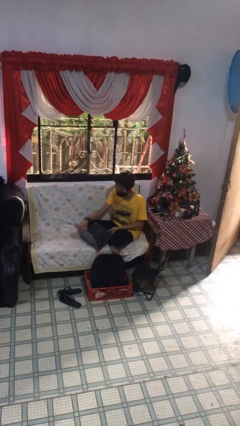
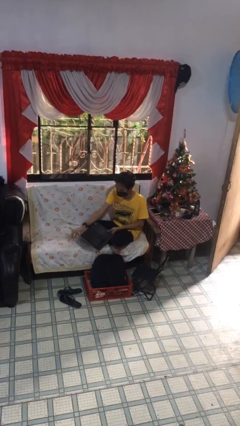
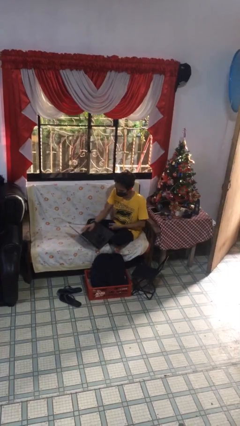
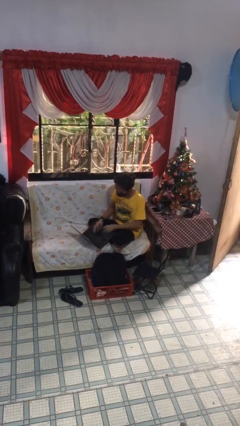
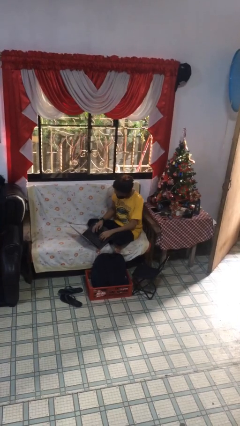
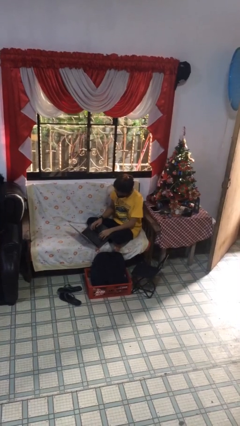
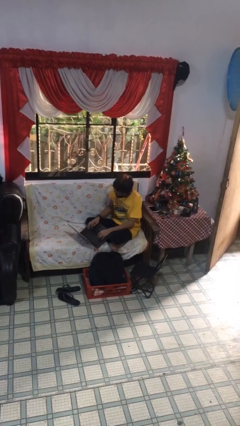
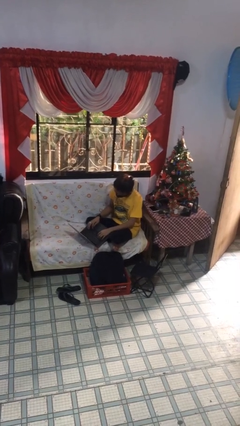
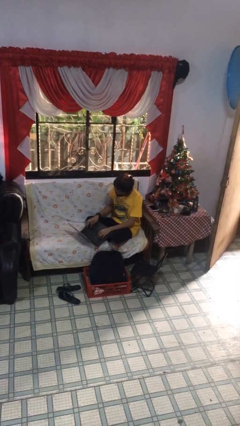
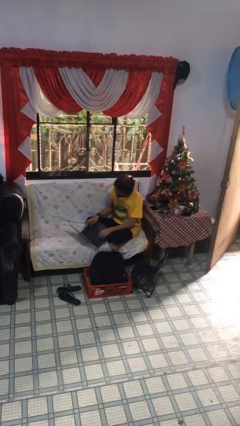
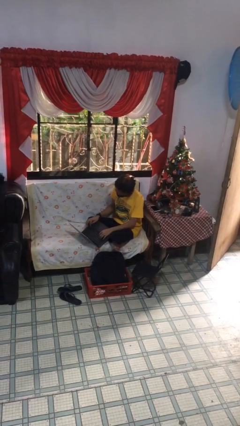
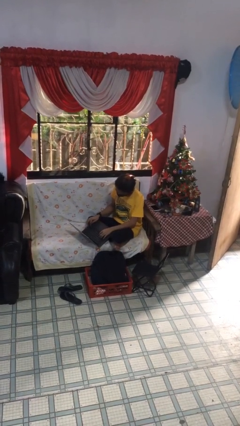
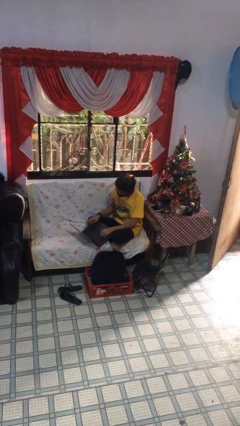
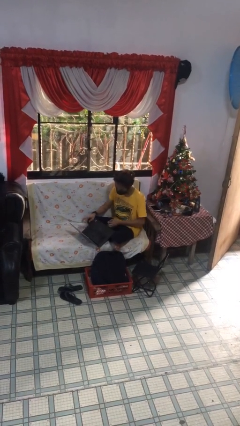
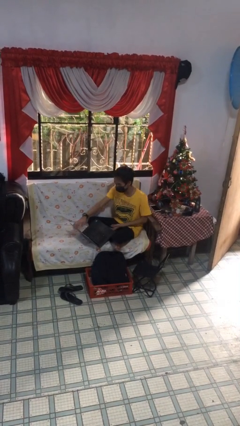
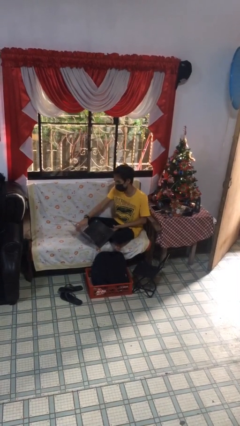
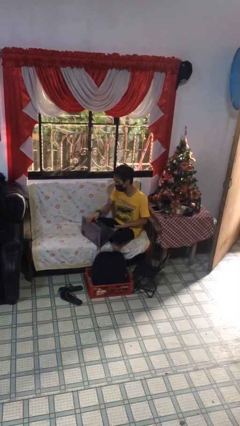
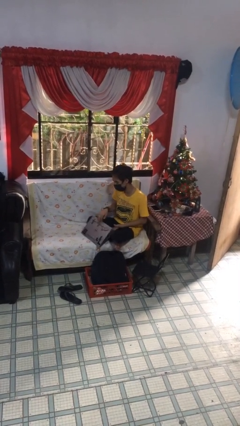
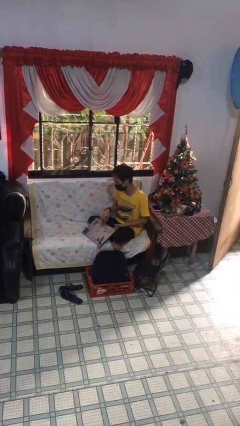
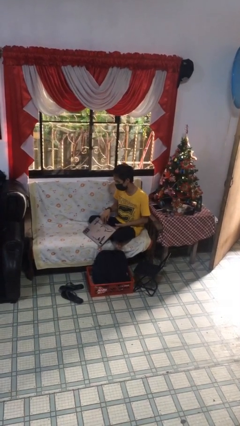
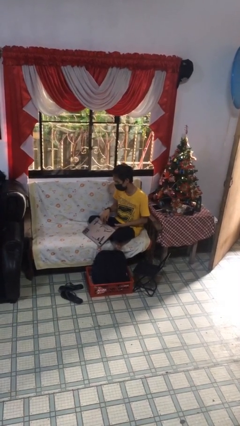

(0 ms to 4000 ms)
person interacts with laptop

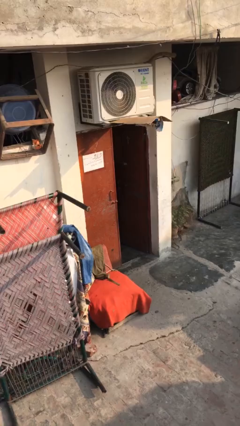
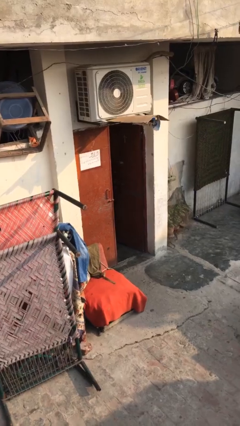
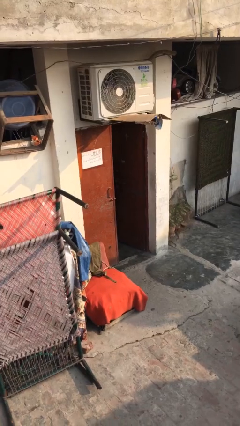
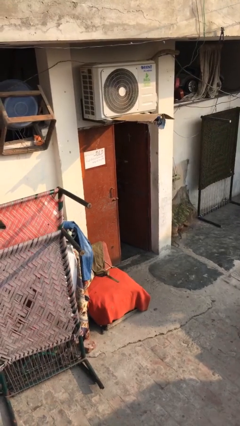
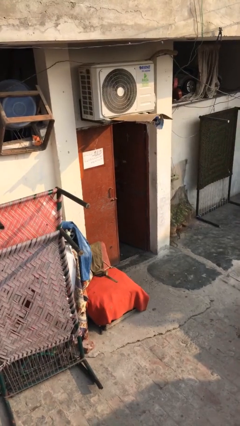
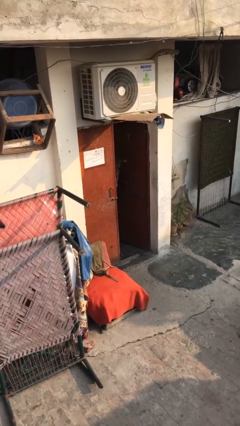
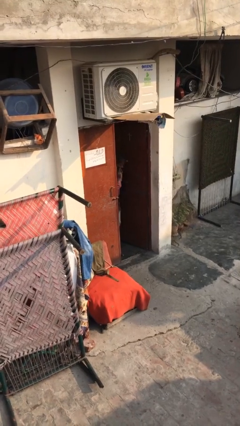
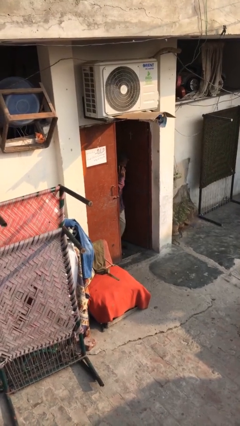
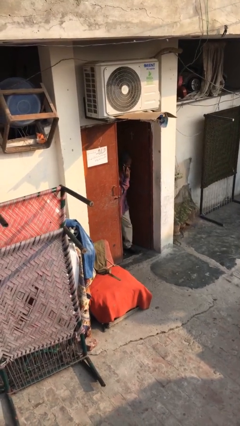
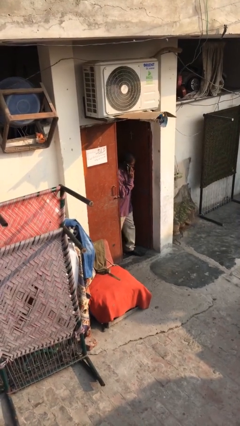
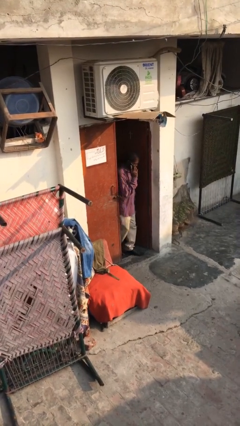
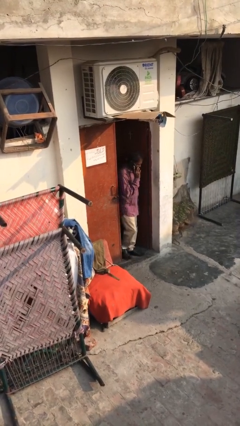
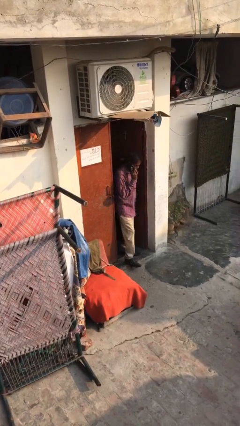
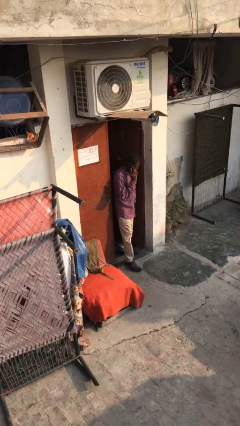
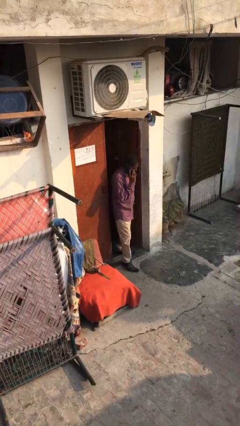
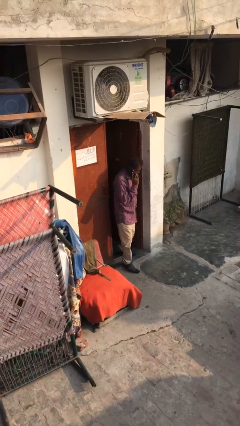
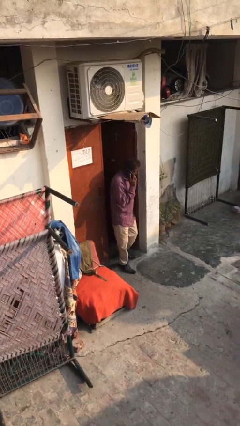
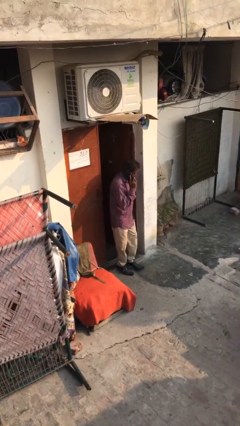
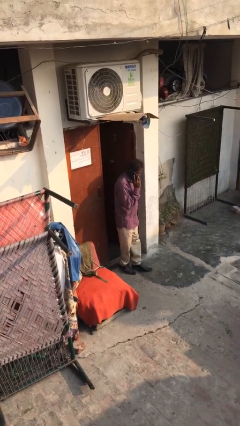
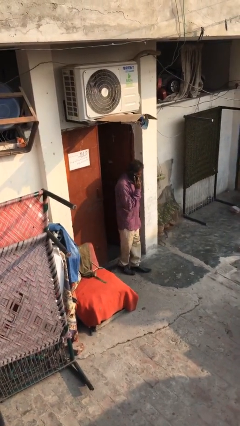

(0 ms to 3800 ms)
person enters scene through structure

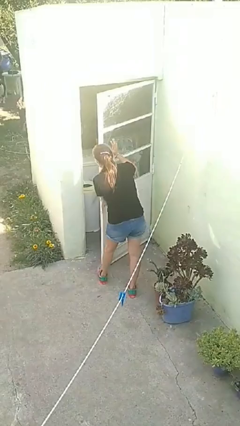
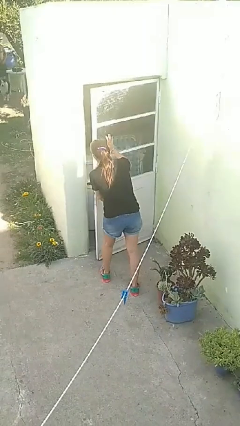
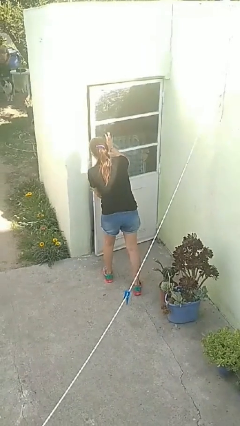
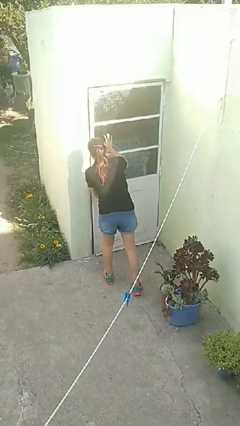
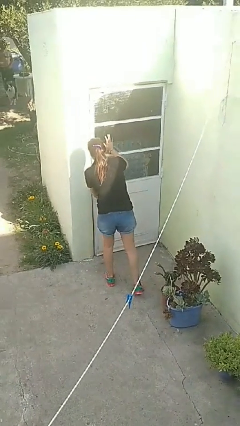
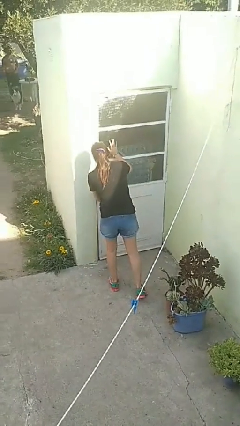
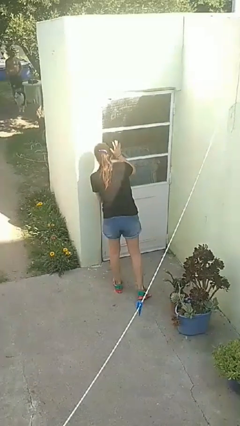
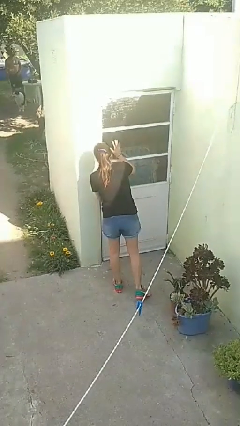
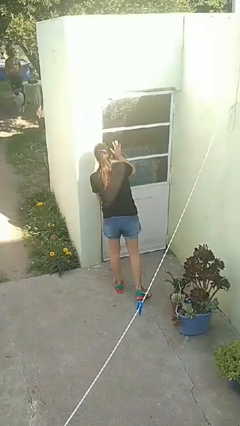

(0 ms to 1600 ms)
person closes facility door

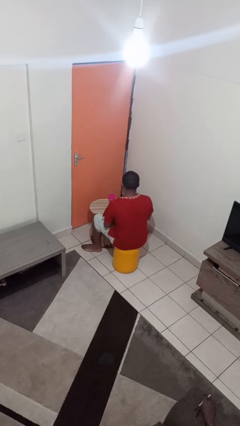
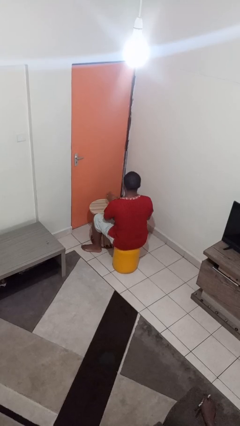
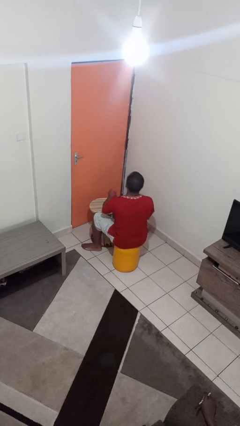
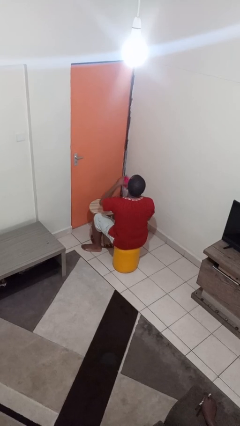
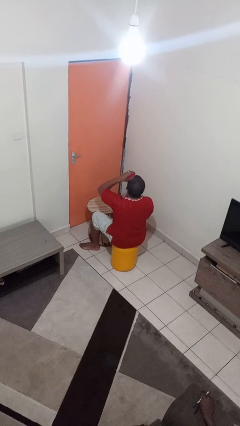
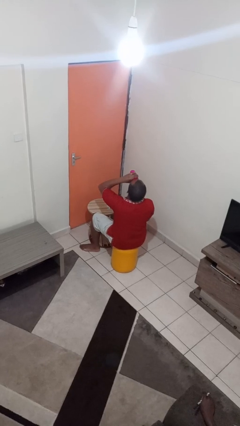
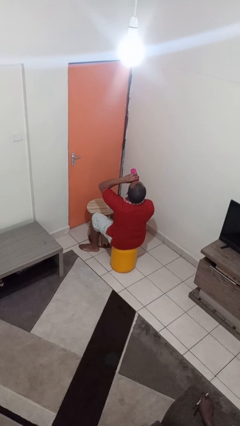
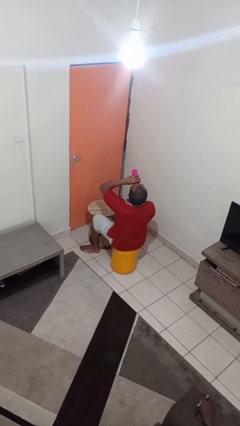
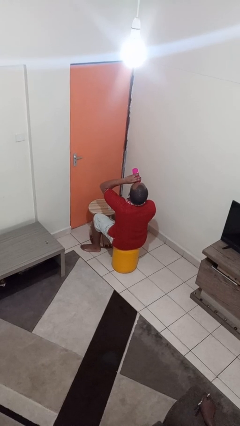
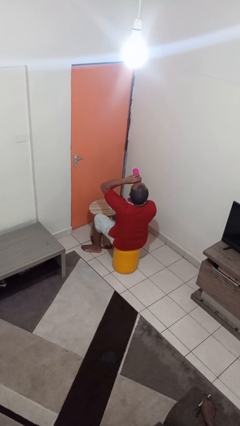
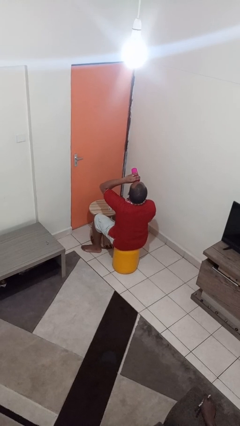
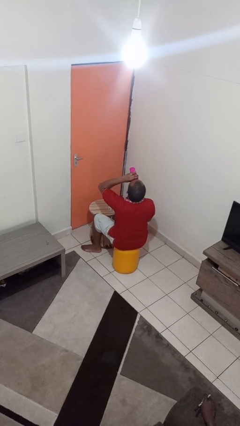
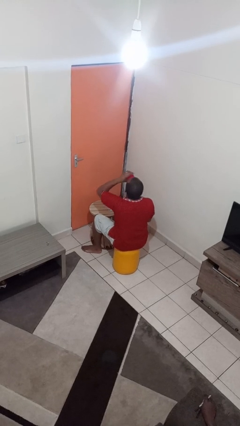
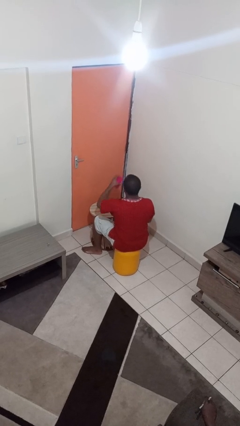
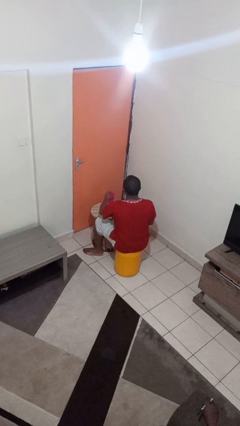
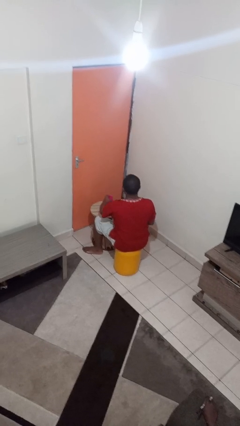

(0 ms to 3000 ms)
person drinks from cup

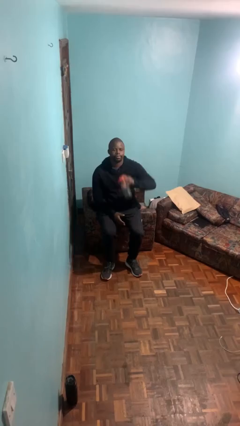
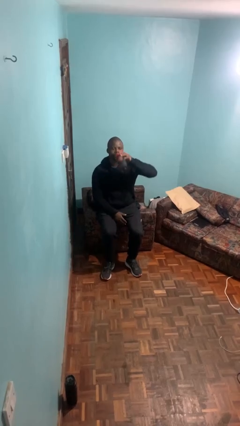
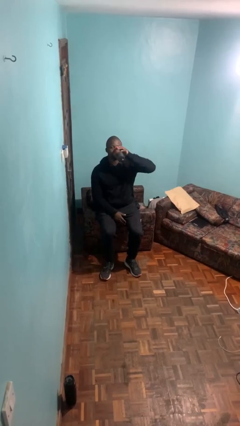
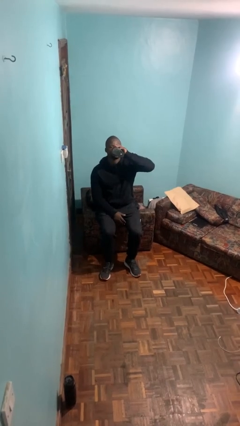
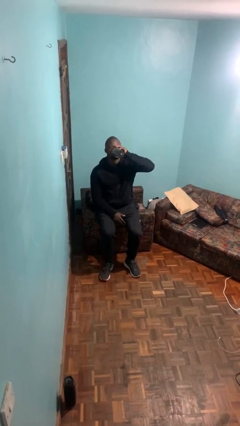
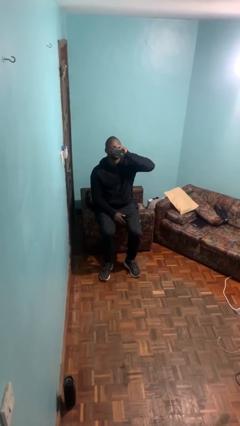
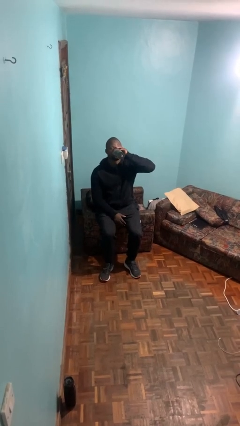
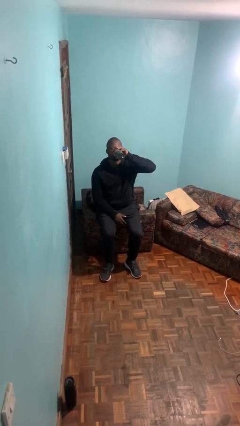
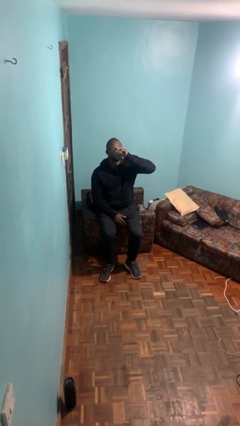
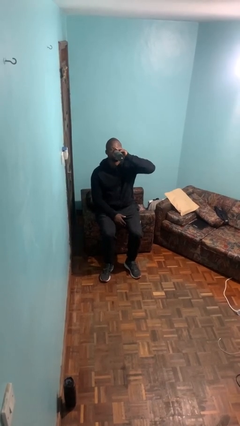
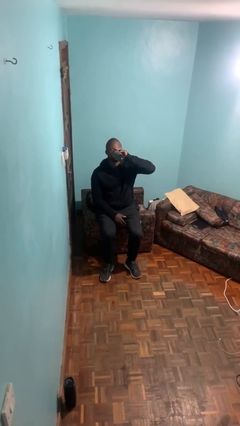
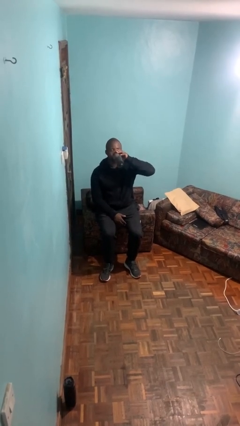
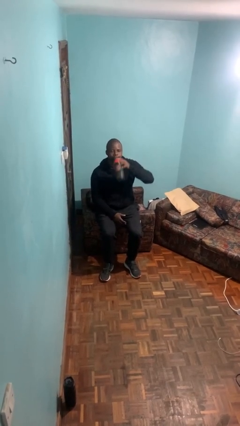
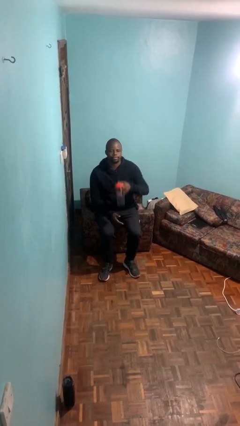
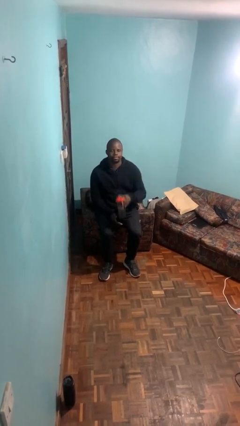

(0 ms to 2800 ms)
person drinks from bottle

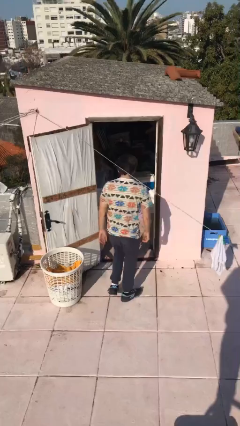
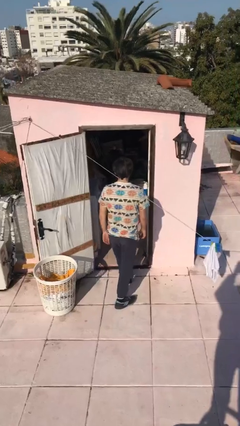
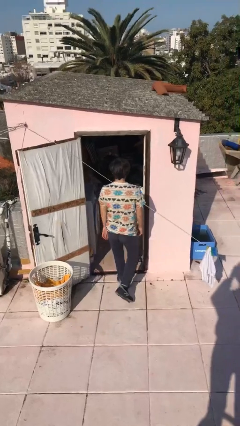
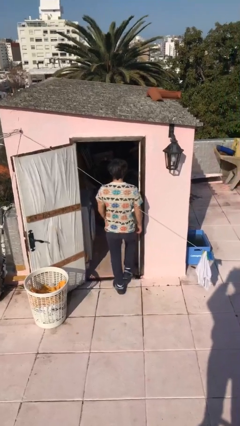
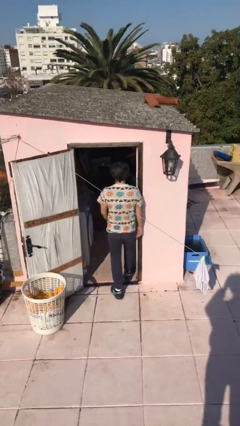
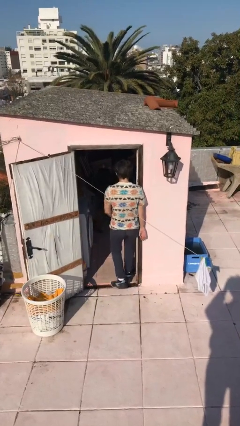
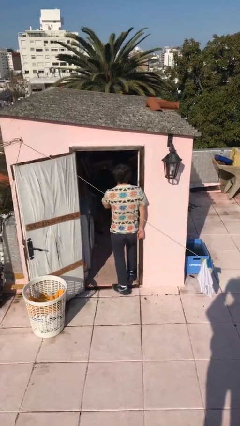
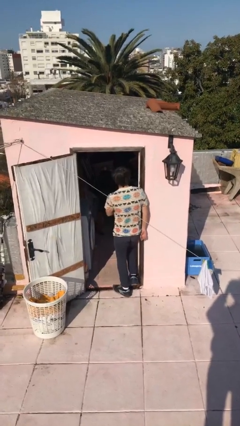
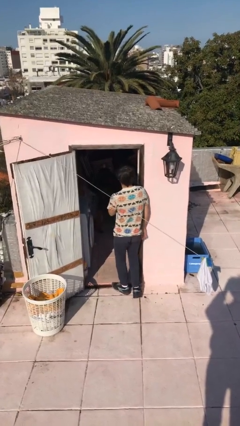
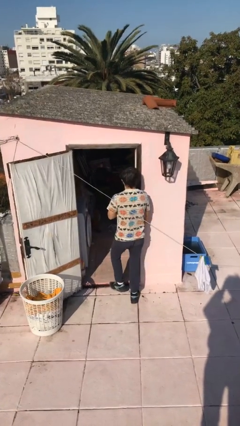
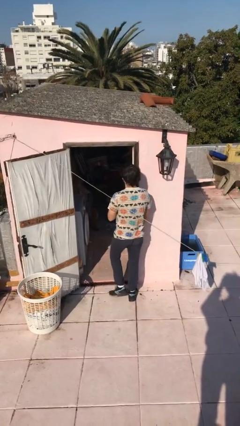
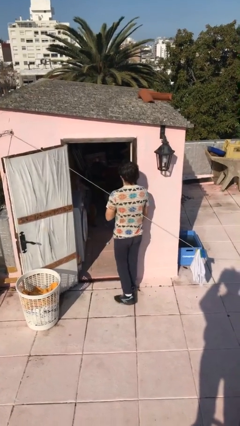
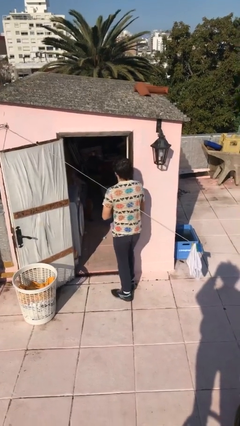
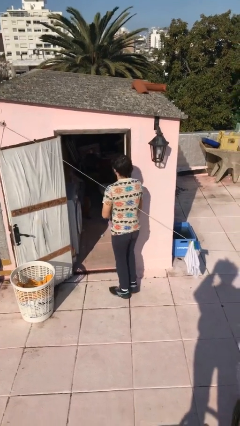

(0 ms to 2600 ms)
person bumps into wall
